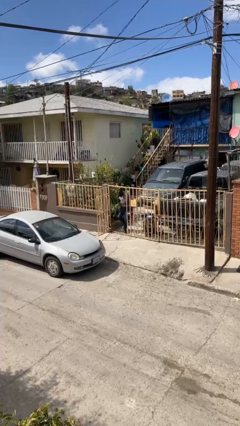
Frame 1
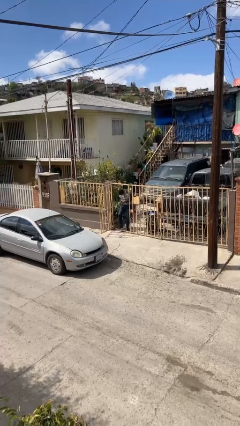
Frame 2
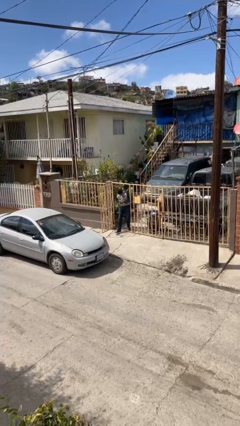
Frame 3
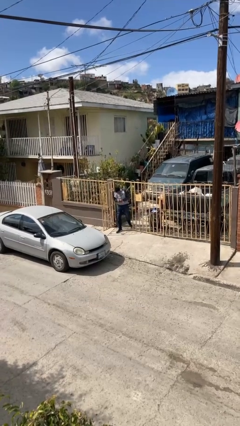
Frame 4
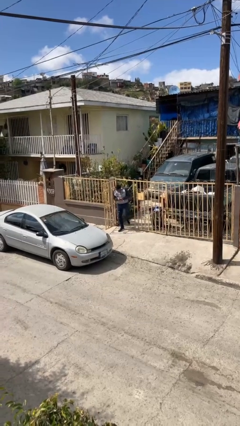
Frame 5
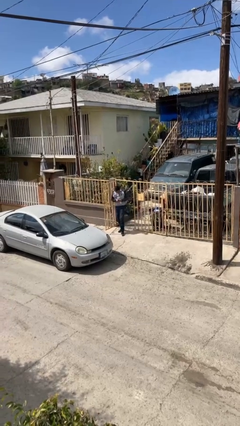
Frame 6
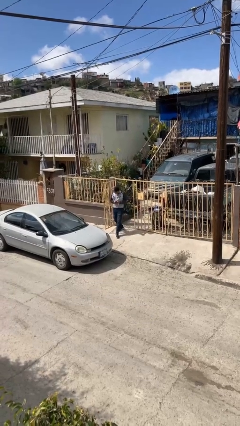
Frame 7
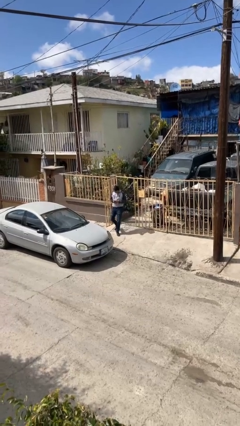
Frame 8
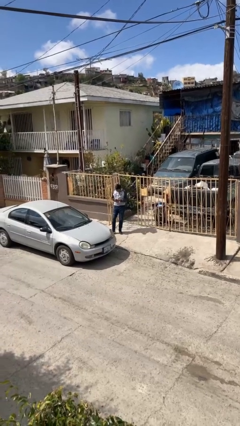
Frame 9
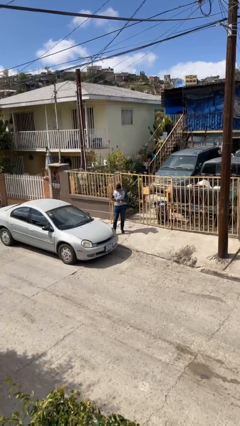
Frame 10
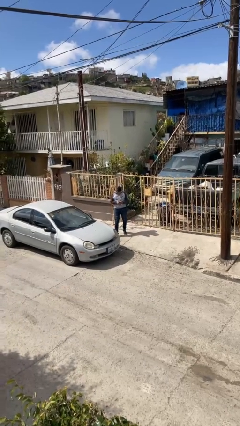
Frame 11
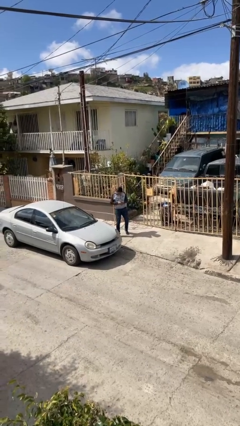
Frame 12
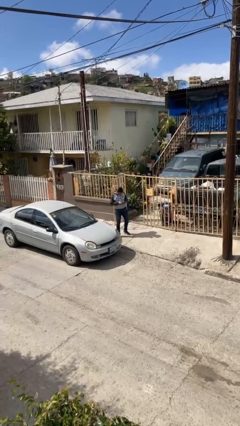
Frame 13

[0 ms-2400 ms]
person enters scene through structure

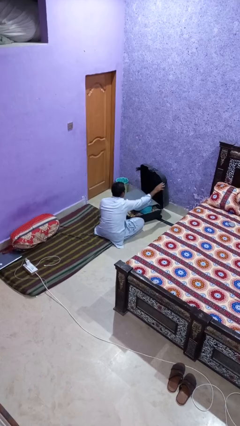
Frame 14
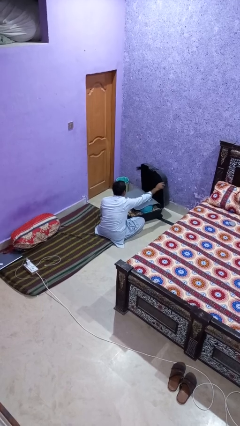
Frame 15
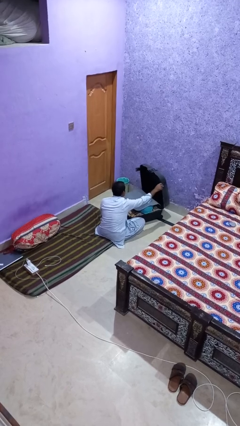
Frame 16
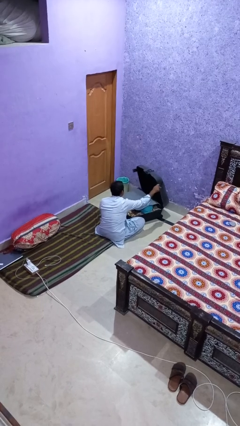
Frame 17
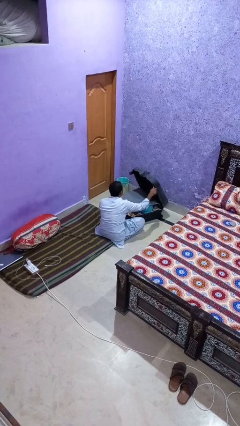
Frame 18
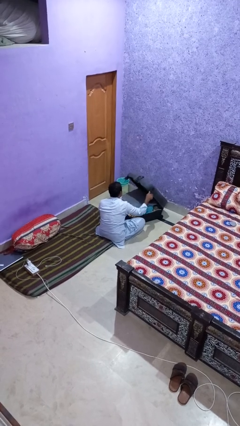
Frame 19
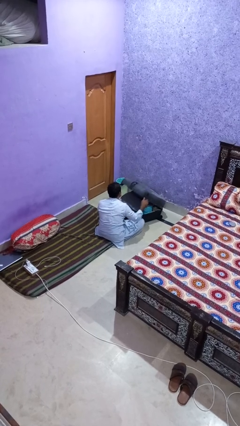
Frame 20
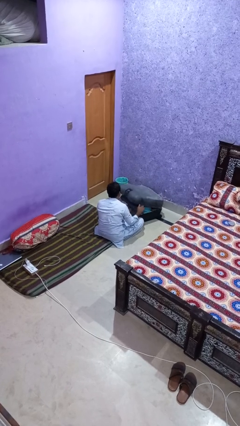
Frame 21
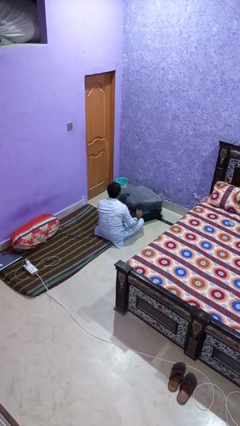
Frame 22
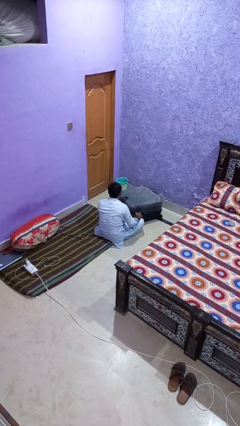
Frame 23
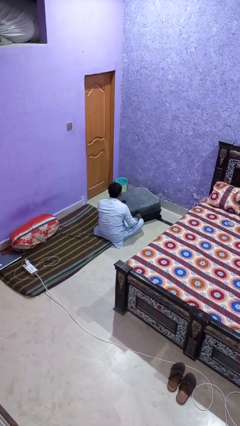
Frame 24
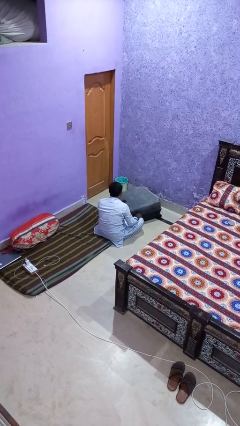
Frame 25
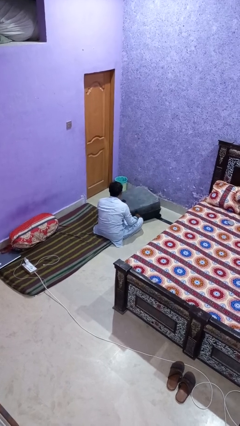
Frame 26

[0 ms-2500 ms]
person closes suitcase

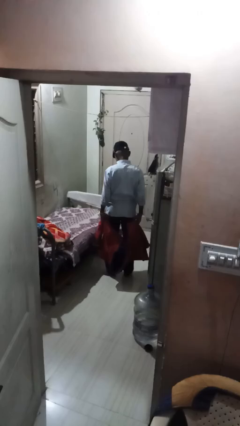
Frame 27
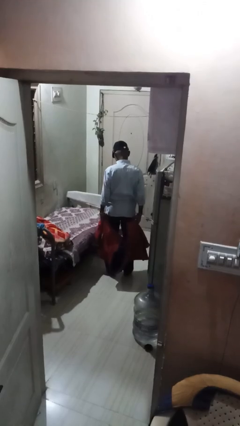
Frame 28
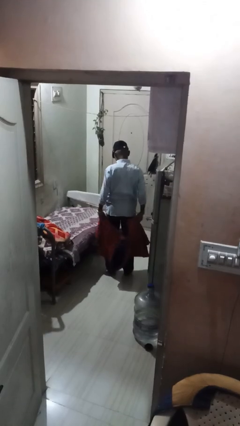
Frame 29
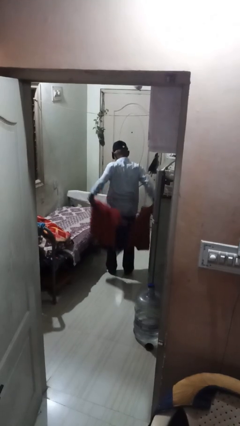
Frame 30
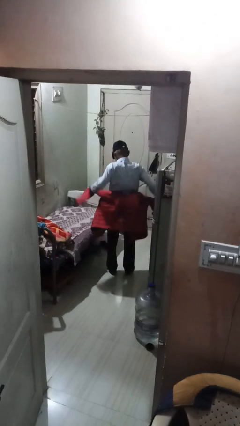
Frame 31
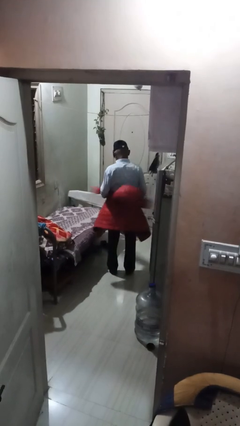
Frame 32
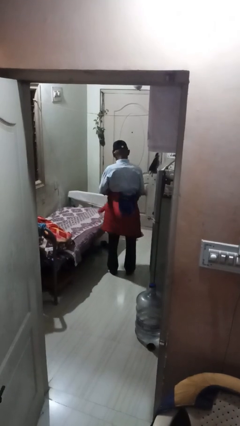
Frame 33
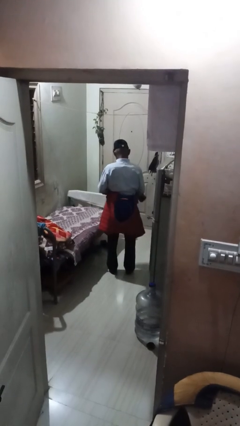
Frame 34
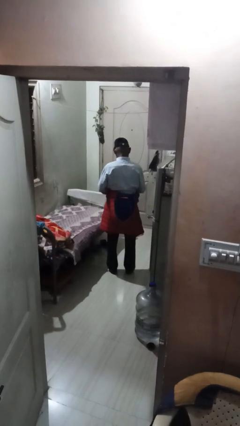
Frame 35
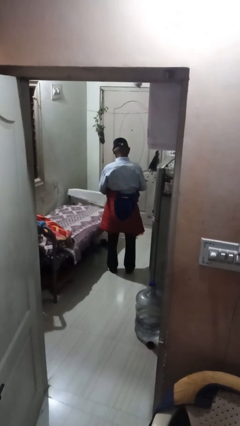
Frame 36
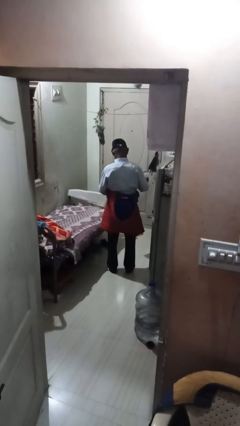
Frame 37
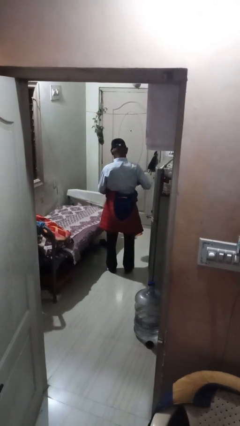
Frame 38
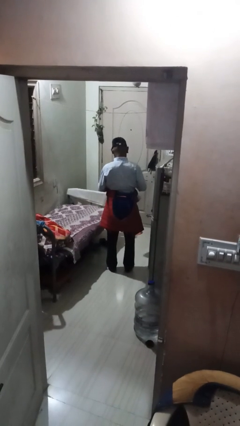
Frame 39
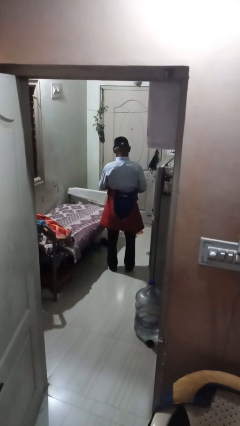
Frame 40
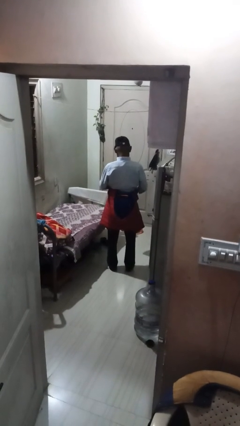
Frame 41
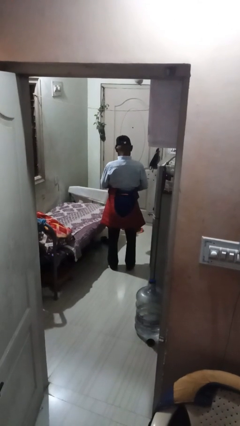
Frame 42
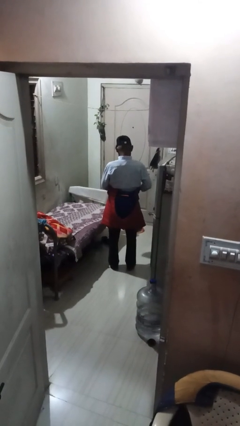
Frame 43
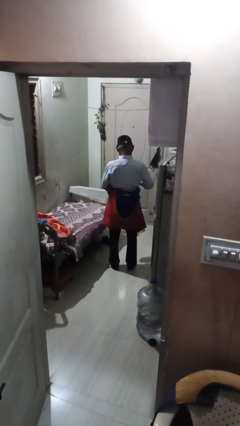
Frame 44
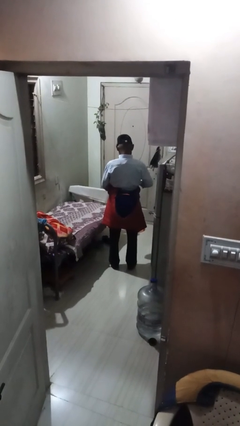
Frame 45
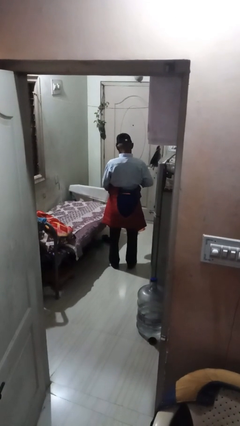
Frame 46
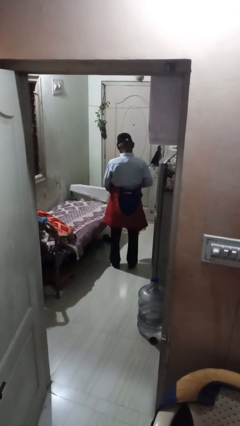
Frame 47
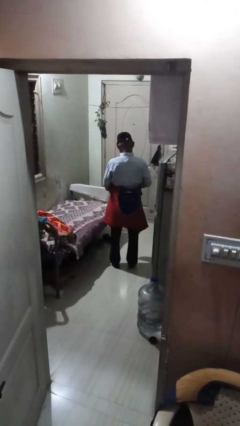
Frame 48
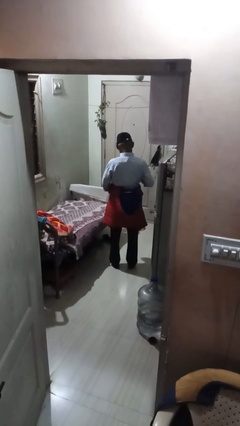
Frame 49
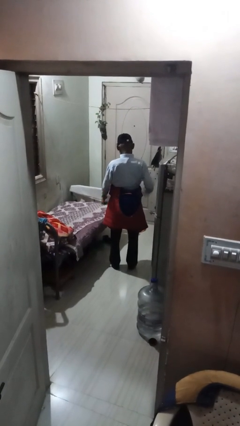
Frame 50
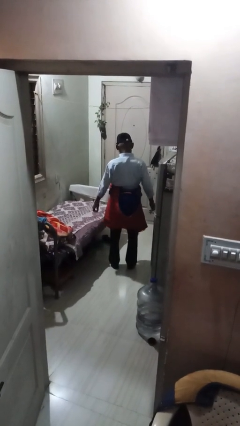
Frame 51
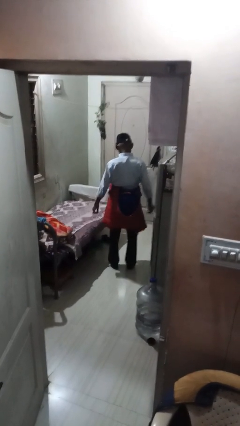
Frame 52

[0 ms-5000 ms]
person ties jacket around waist

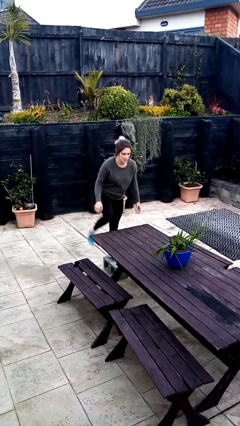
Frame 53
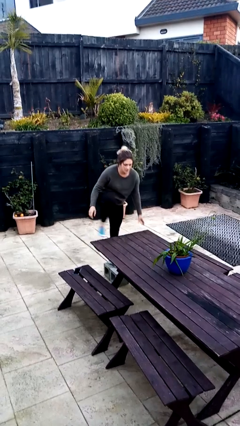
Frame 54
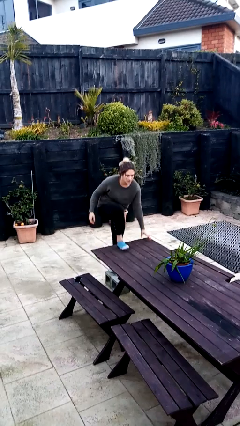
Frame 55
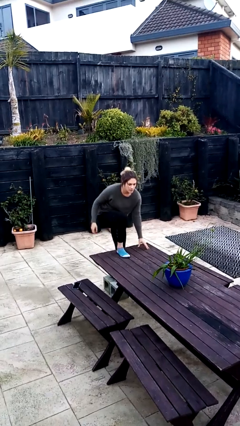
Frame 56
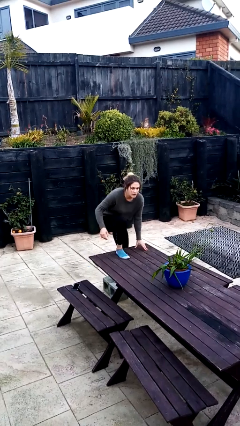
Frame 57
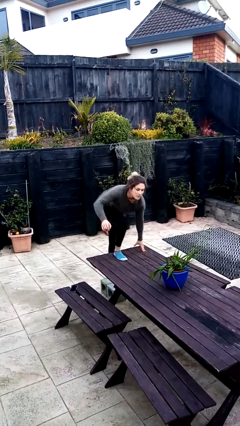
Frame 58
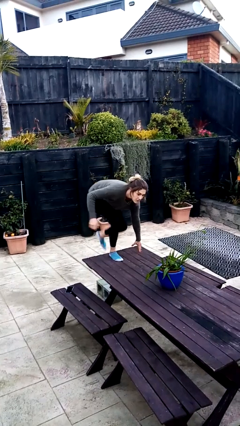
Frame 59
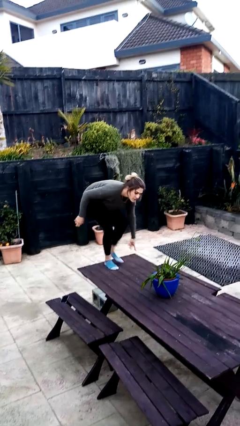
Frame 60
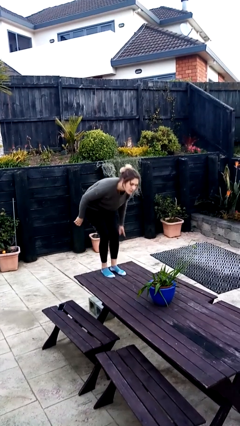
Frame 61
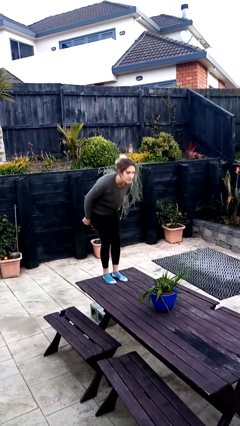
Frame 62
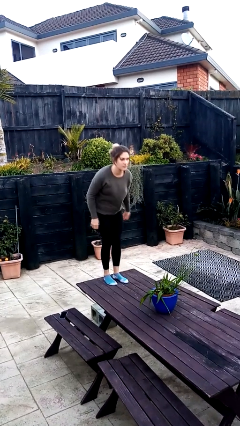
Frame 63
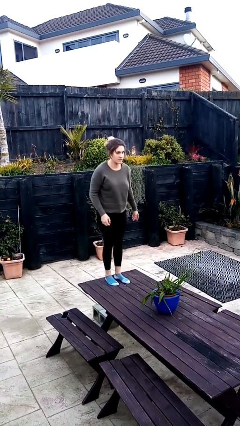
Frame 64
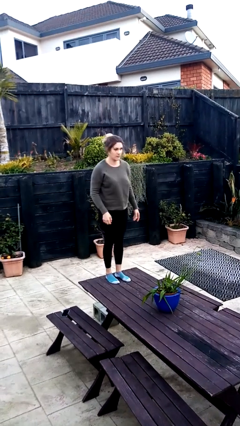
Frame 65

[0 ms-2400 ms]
person climbs on table

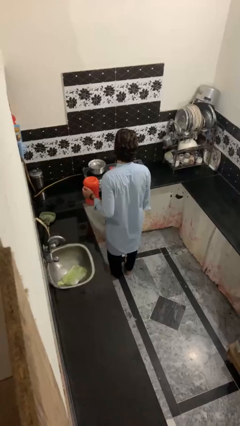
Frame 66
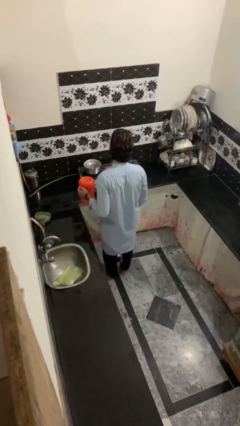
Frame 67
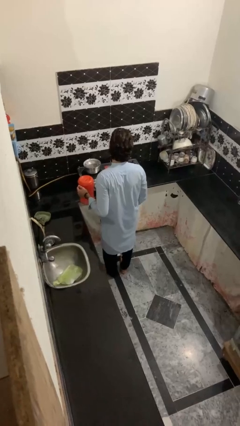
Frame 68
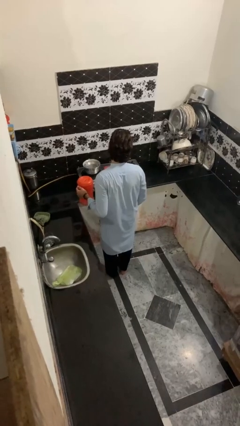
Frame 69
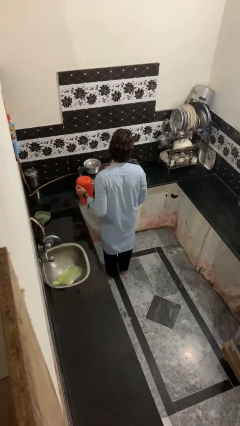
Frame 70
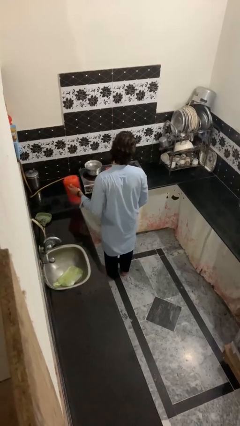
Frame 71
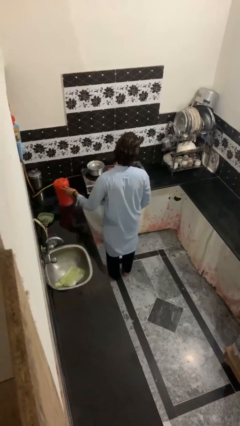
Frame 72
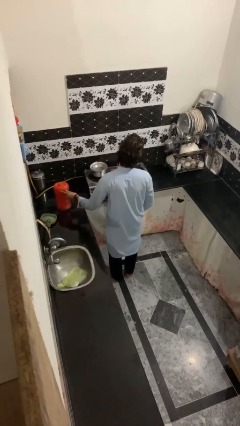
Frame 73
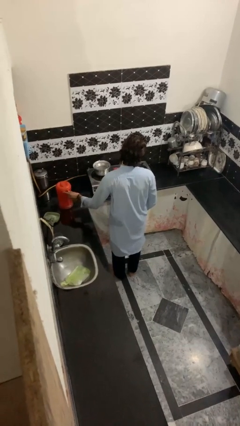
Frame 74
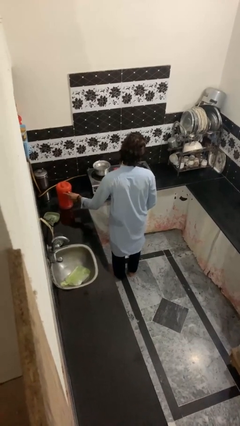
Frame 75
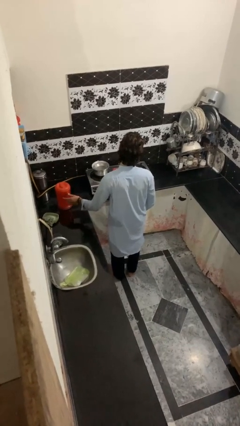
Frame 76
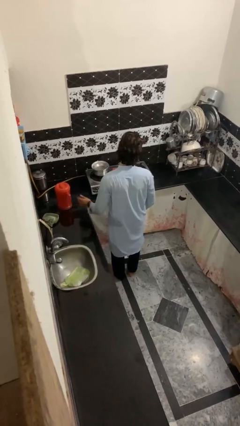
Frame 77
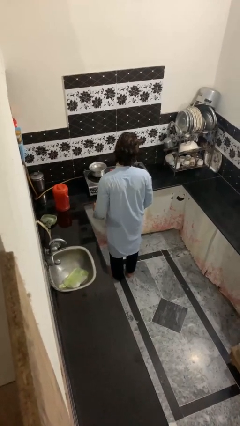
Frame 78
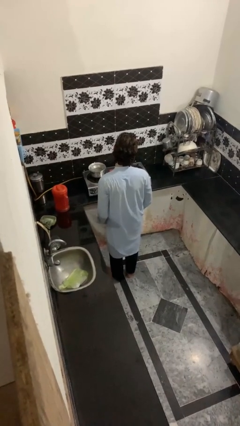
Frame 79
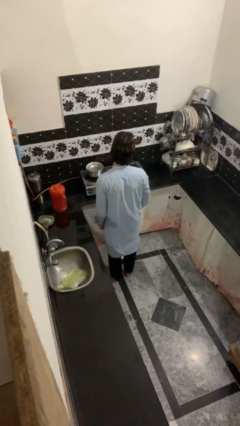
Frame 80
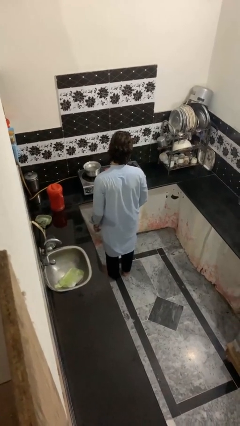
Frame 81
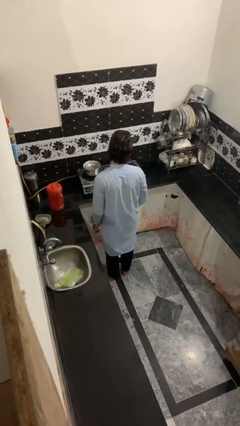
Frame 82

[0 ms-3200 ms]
person puts down object on countertop

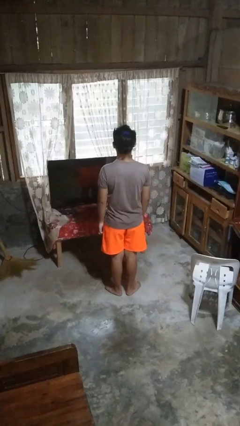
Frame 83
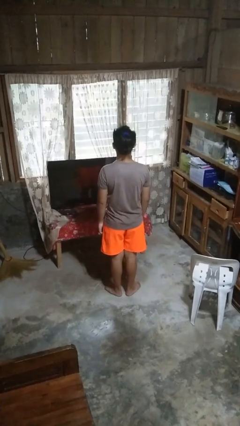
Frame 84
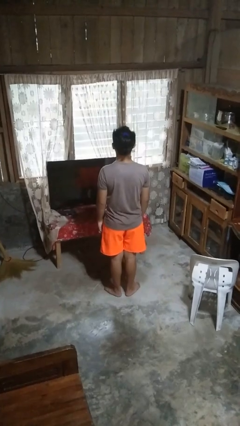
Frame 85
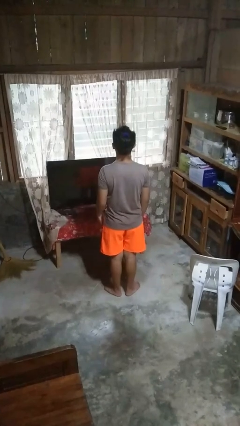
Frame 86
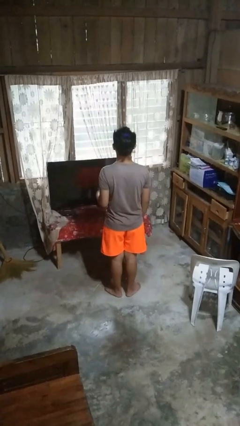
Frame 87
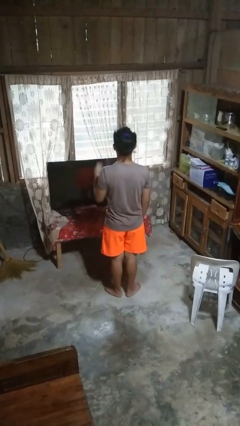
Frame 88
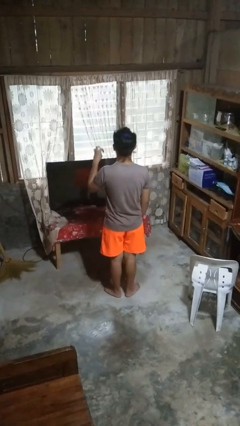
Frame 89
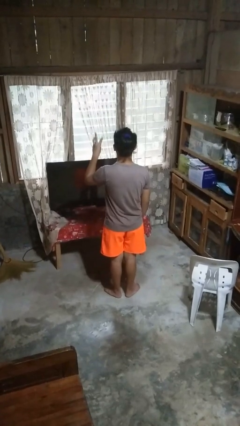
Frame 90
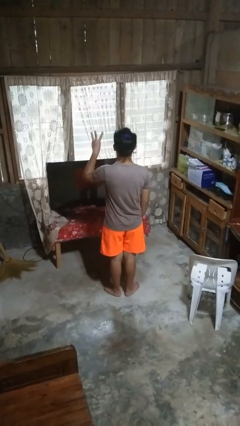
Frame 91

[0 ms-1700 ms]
person gestures number three

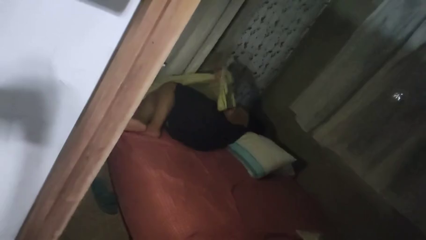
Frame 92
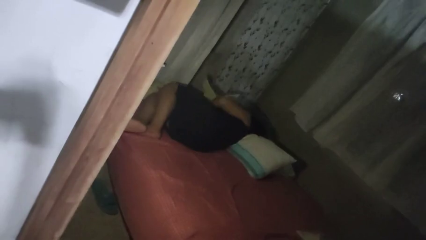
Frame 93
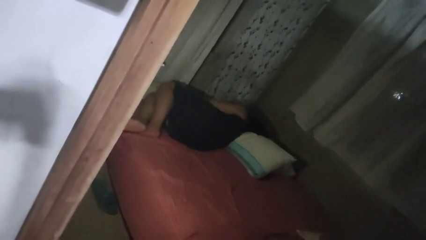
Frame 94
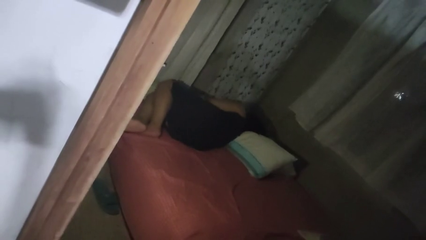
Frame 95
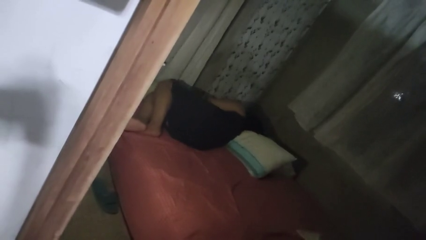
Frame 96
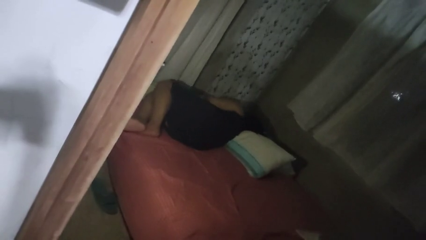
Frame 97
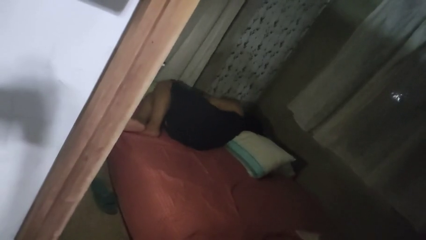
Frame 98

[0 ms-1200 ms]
person uncovers with bedsheets
